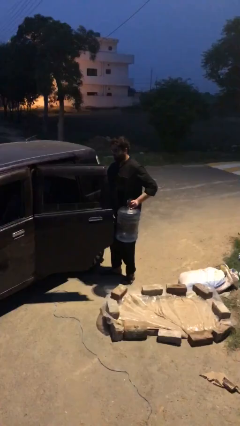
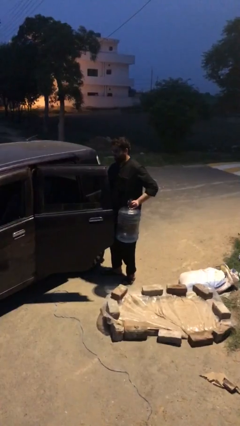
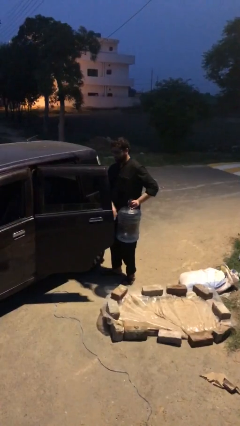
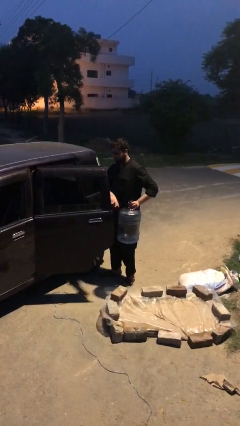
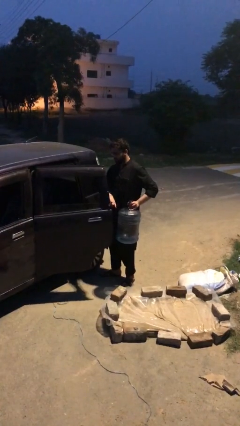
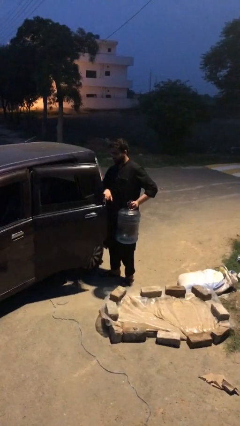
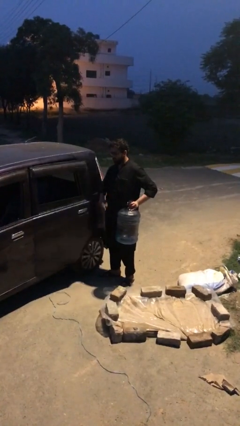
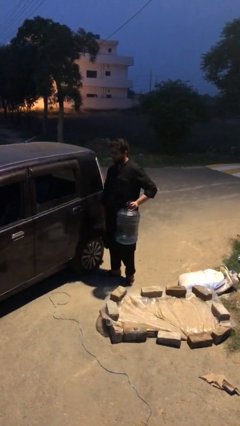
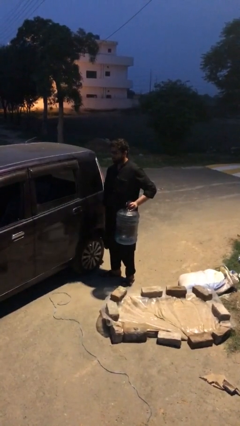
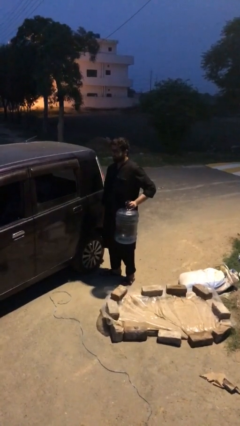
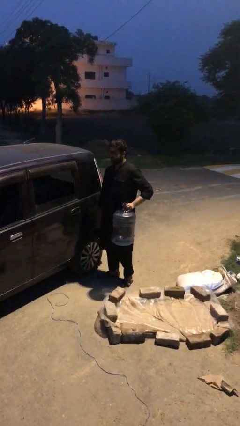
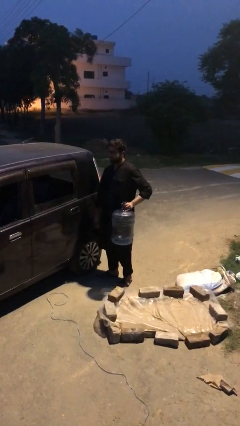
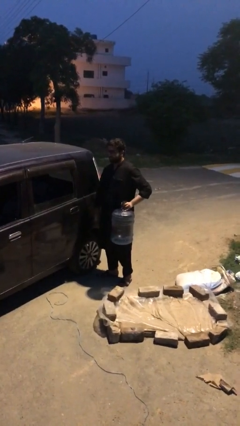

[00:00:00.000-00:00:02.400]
person closes car door

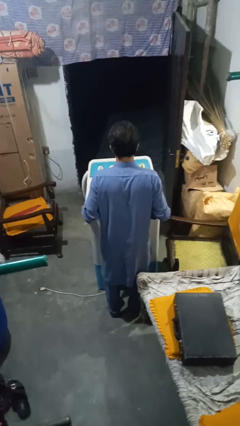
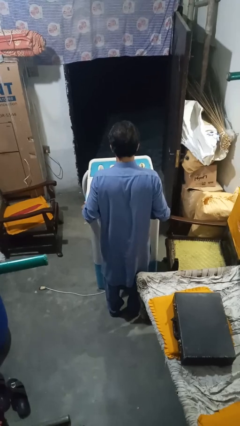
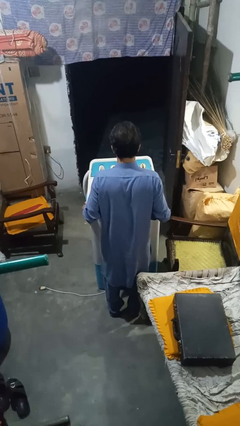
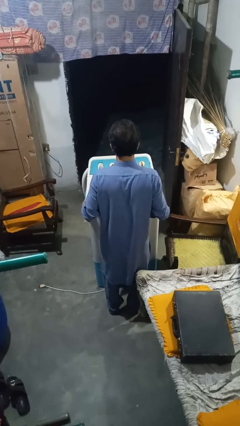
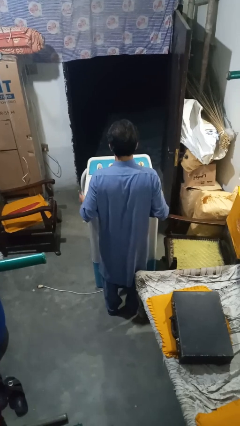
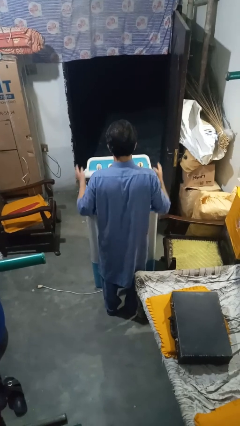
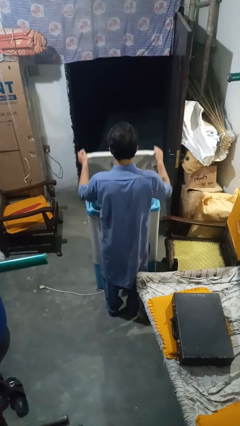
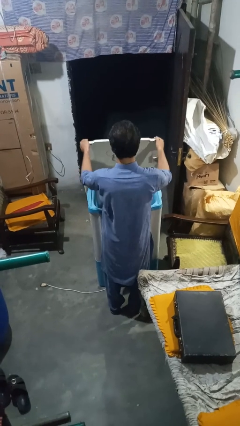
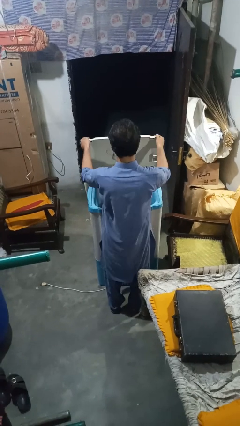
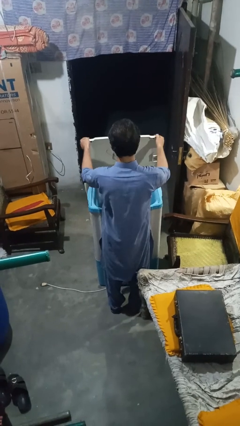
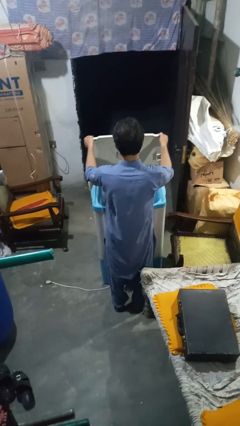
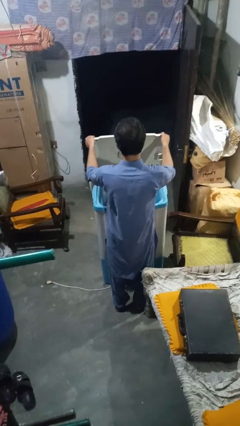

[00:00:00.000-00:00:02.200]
person opens clothes washer

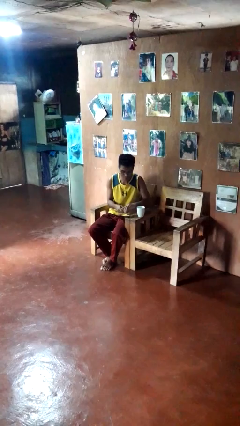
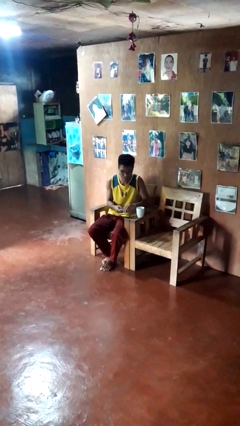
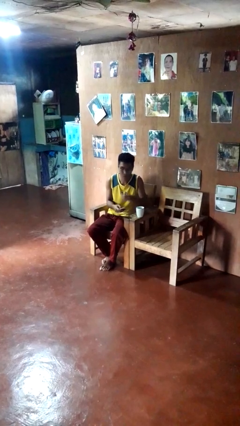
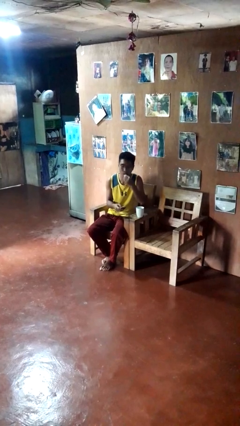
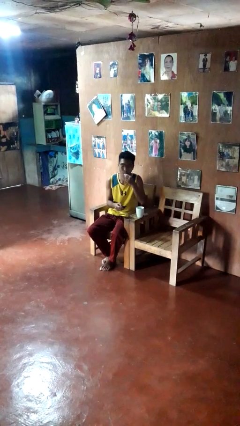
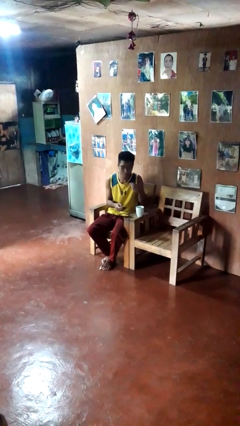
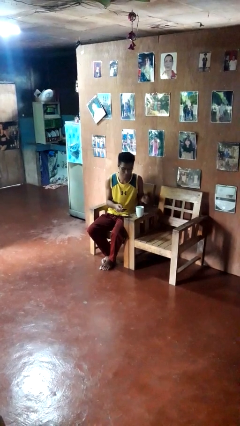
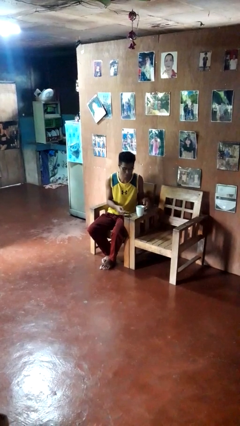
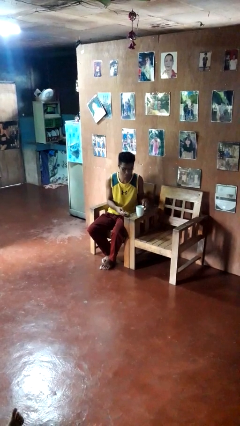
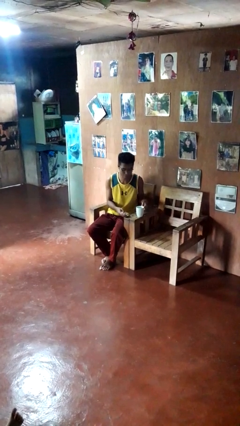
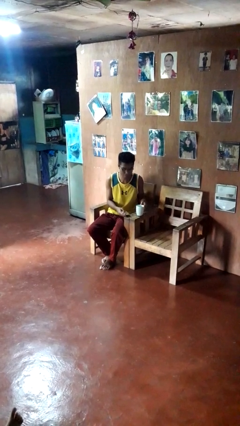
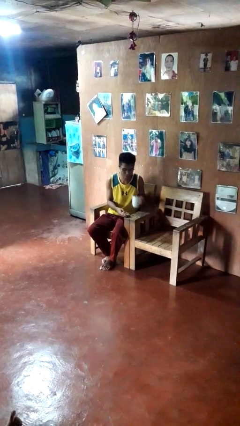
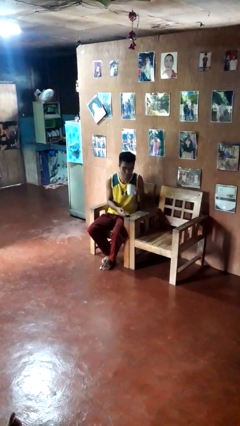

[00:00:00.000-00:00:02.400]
person takes medicine pills

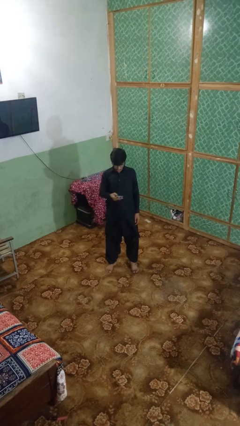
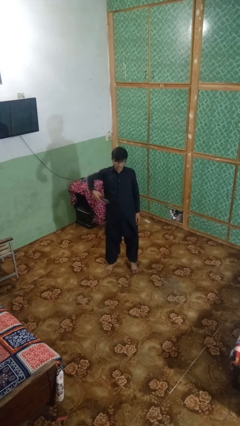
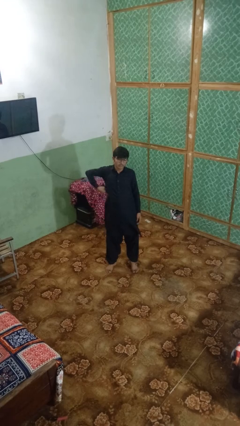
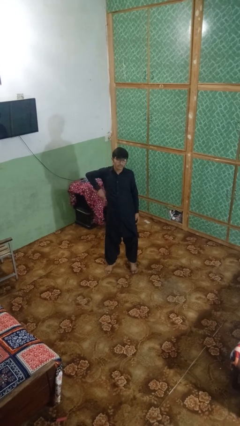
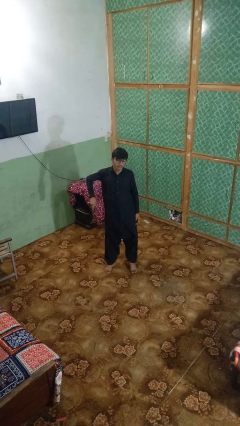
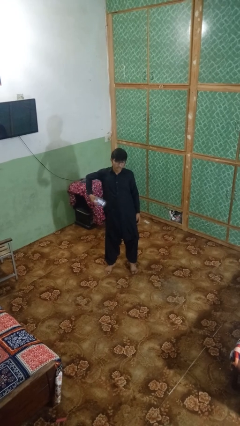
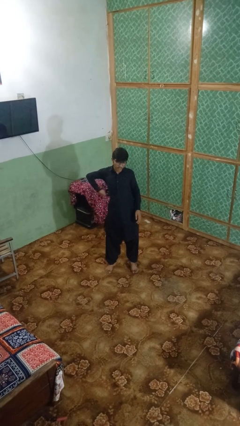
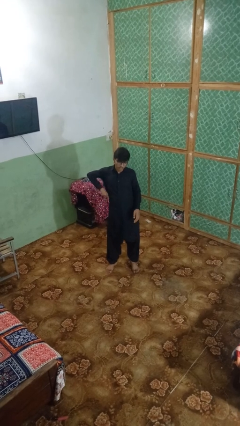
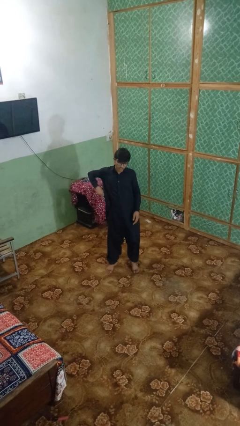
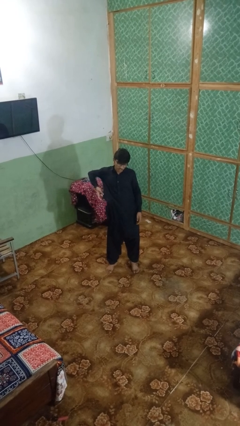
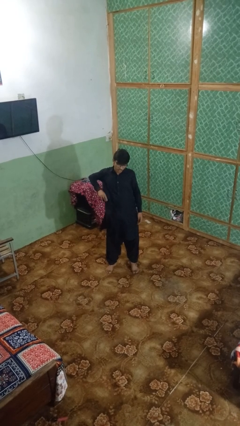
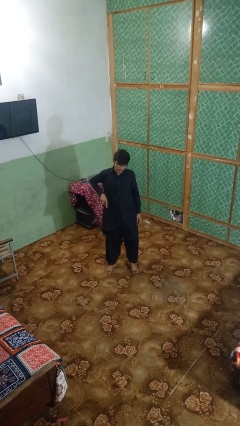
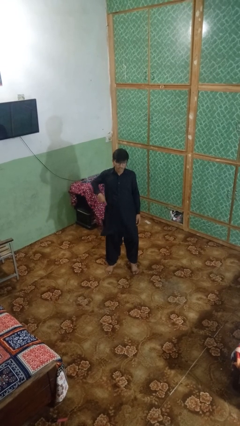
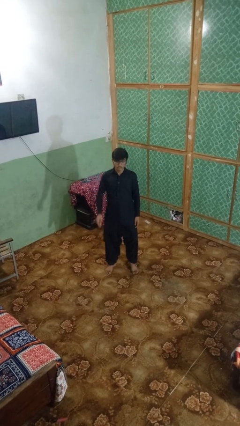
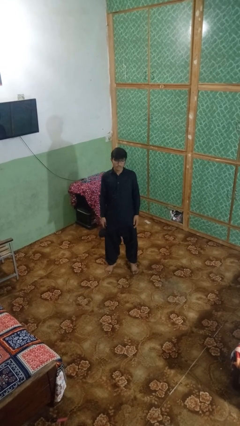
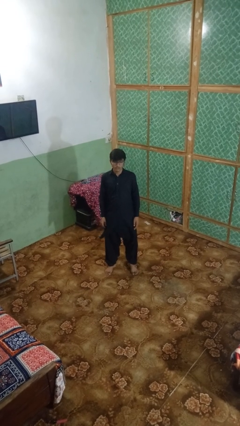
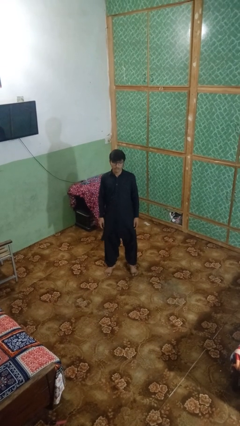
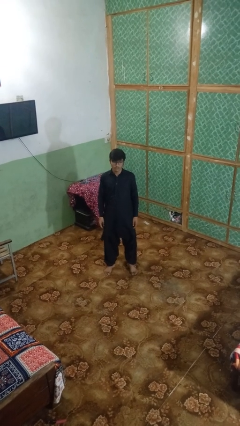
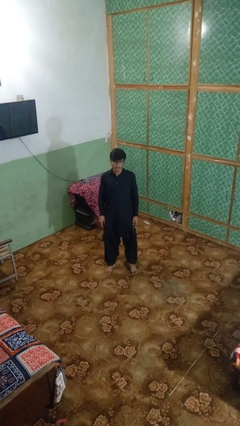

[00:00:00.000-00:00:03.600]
person puts phone into pocket

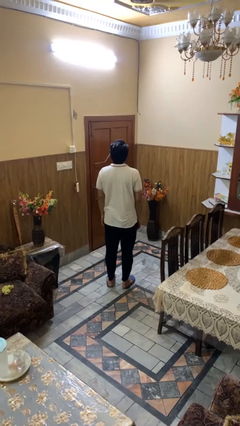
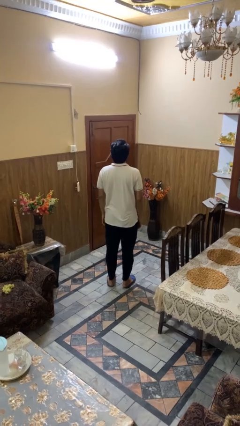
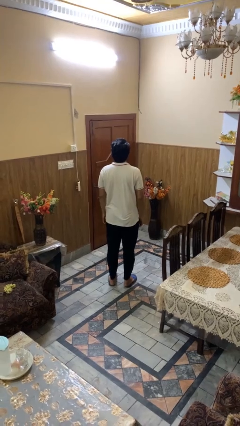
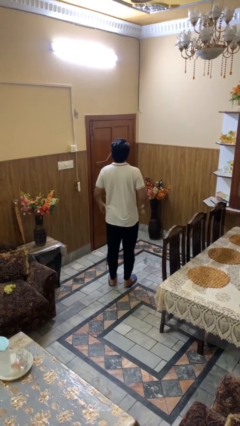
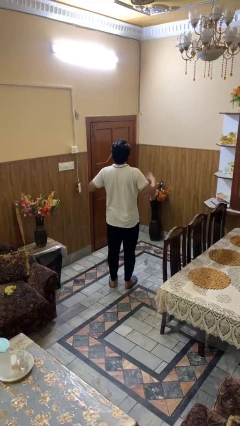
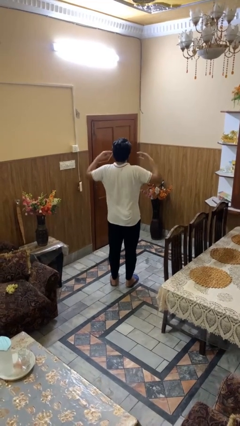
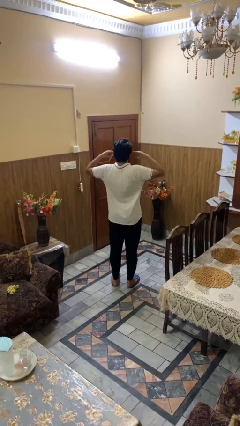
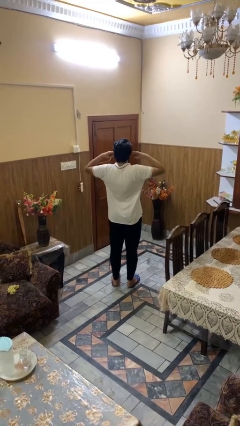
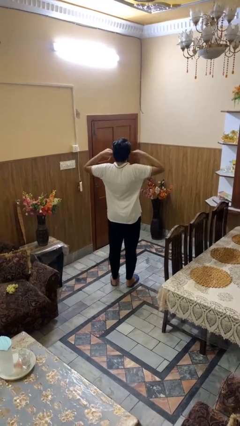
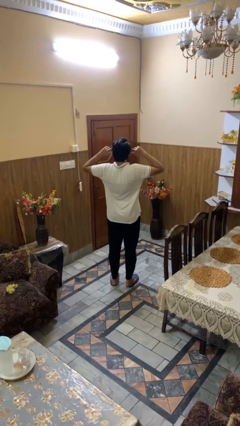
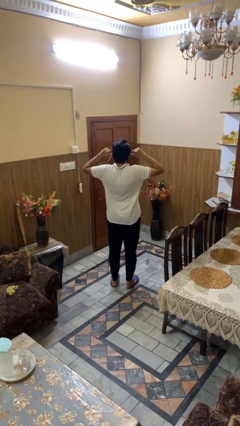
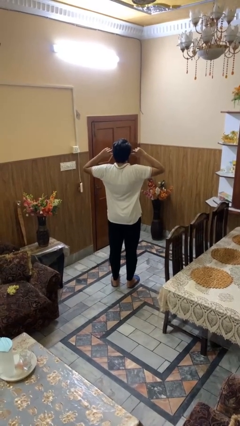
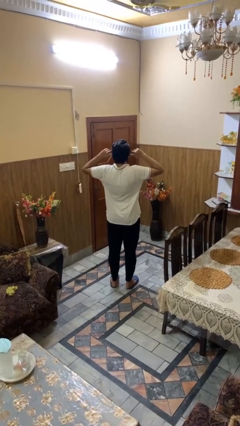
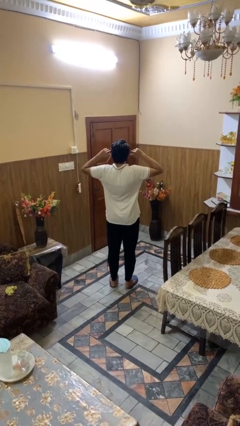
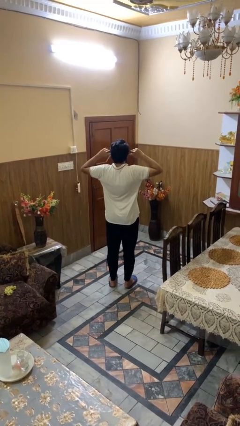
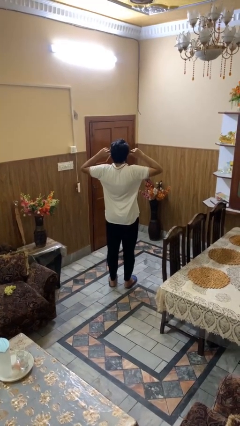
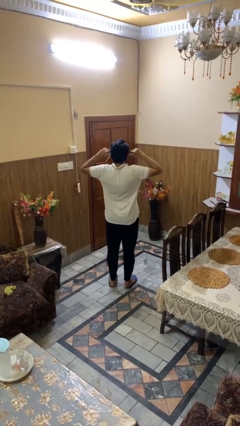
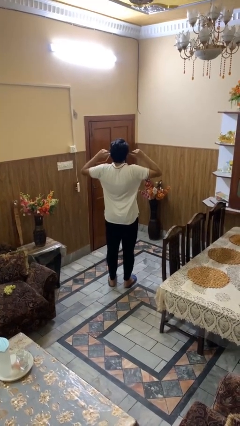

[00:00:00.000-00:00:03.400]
person puts fingers in ear

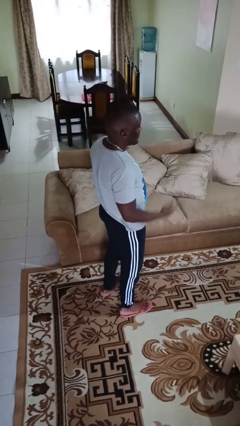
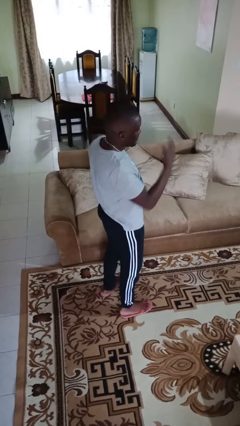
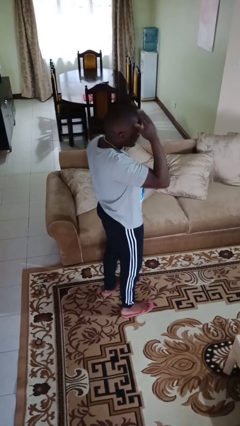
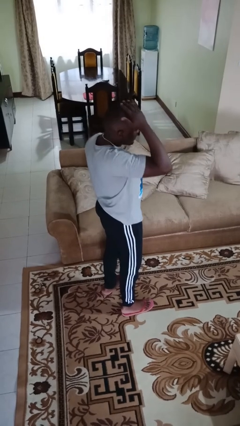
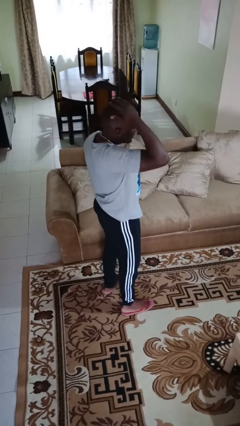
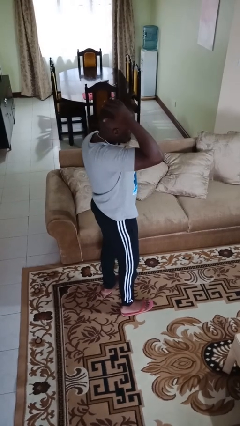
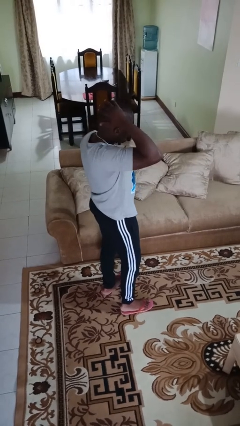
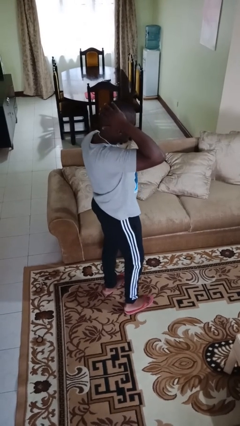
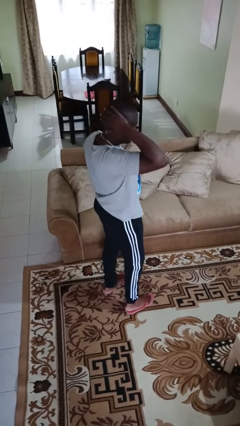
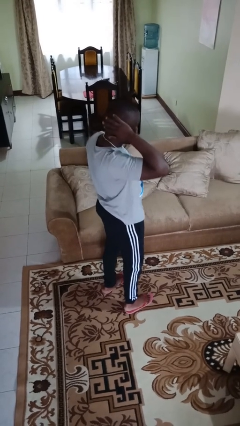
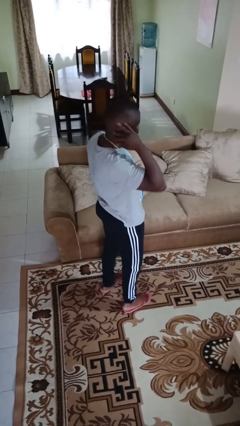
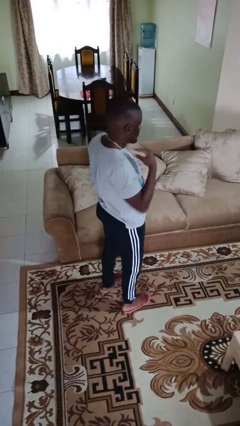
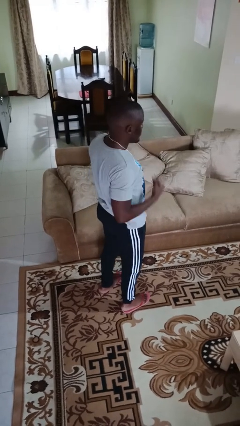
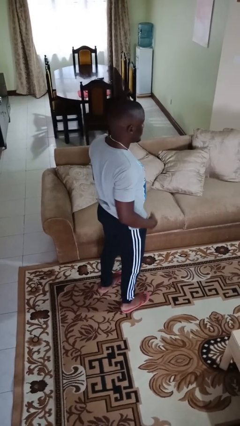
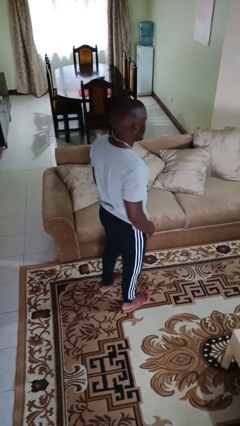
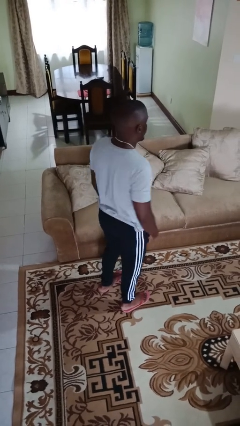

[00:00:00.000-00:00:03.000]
person strokes hair

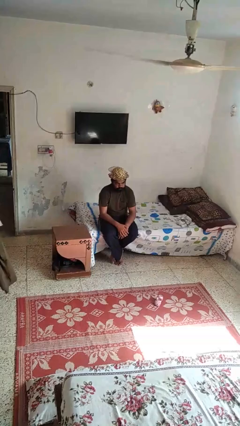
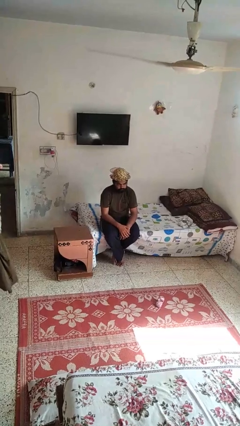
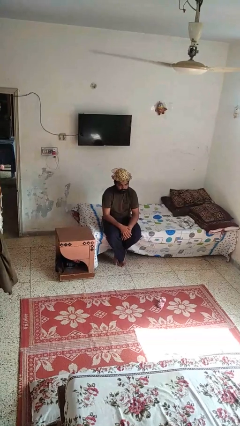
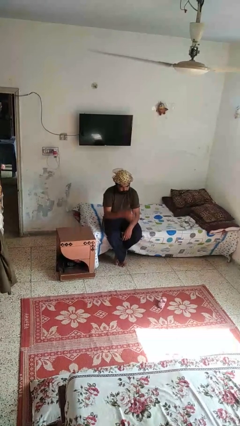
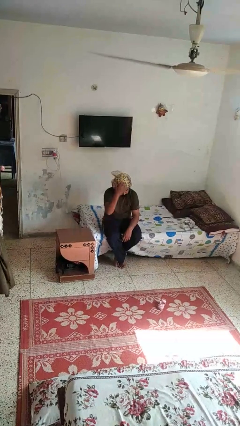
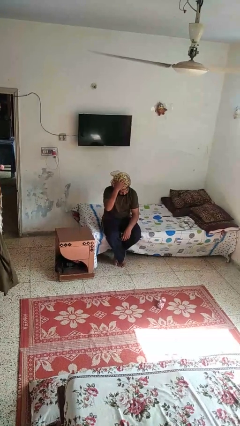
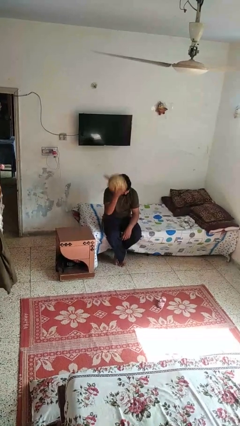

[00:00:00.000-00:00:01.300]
person takes off hat
